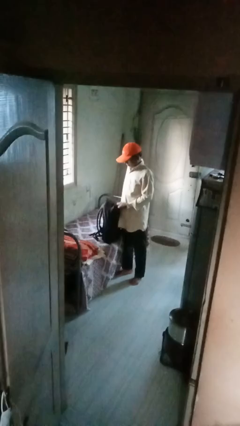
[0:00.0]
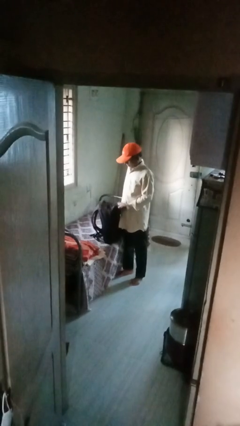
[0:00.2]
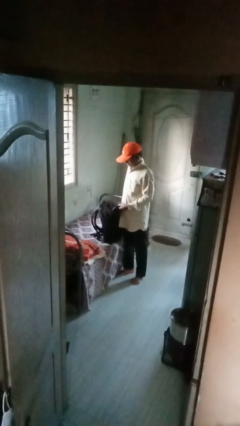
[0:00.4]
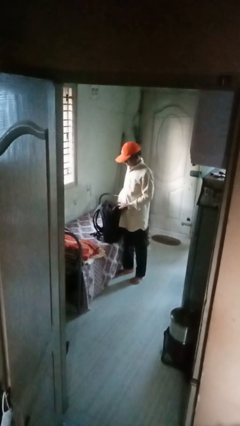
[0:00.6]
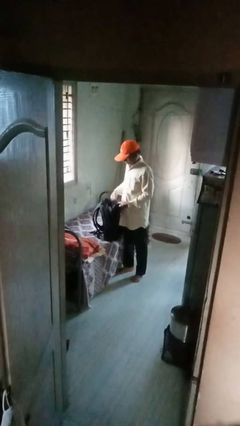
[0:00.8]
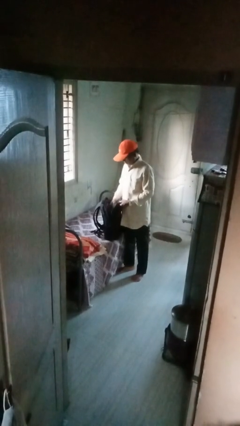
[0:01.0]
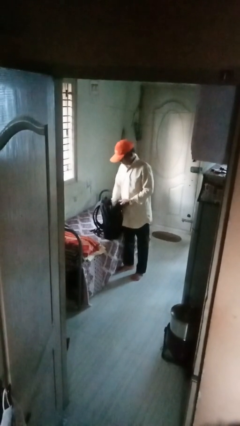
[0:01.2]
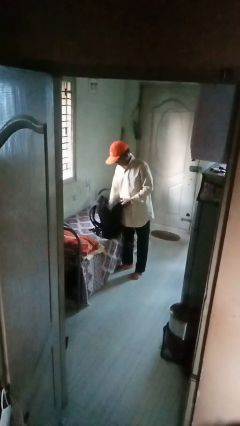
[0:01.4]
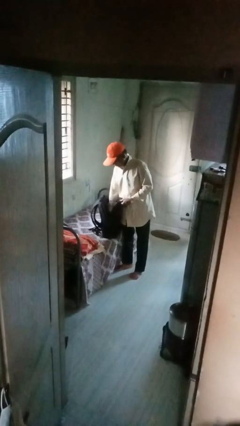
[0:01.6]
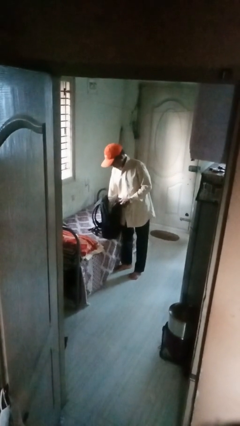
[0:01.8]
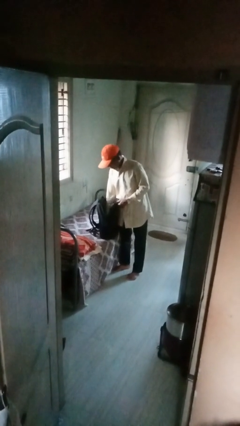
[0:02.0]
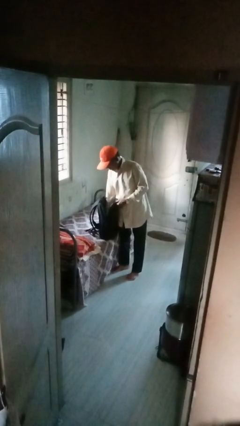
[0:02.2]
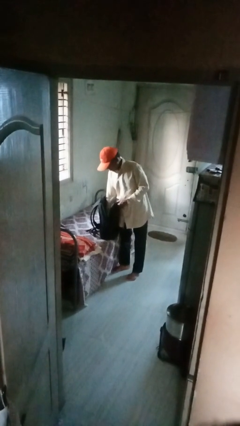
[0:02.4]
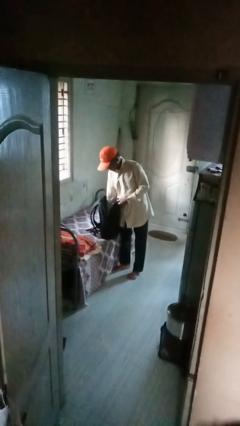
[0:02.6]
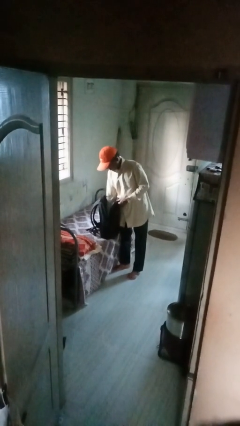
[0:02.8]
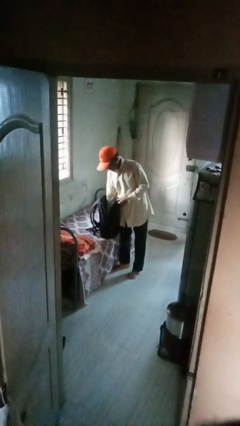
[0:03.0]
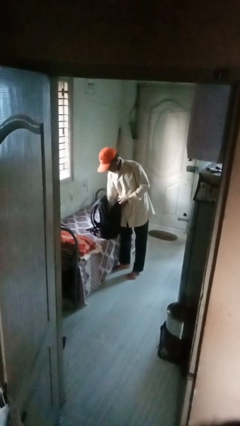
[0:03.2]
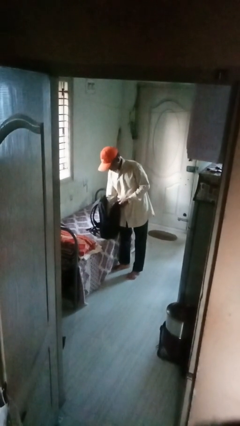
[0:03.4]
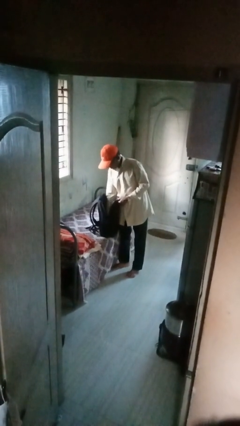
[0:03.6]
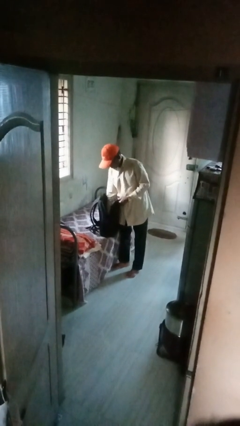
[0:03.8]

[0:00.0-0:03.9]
person searches in backpack

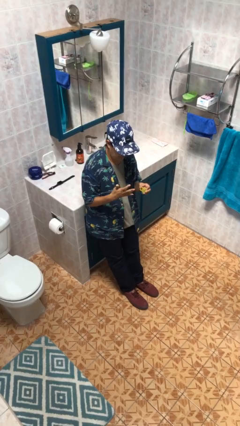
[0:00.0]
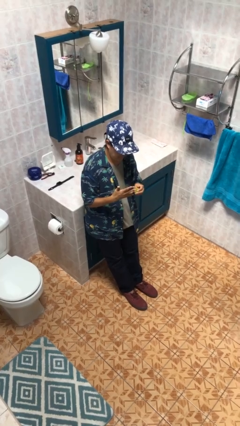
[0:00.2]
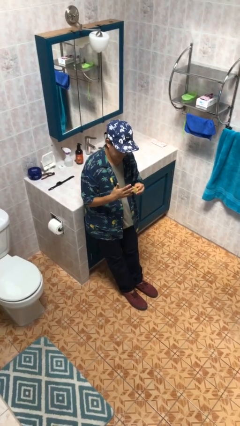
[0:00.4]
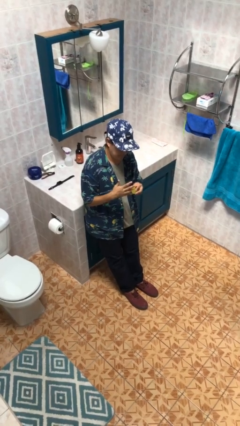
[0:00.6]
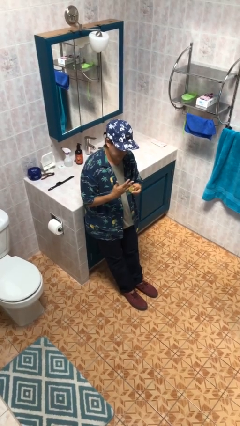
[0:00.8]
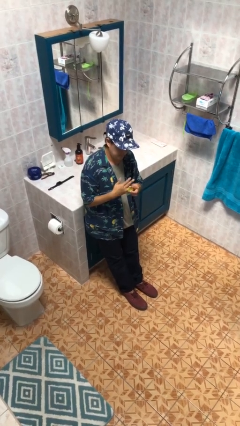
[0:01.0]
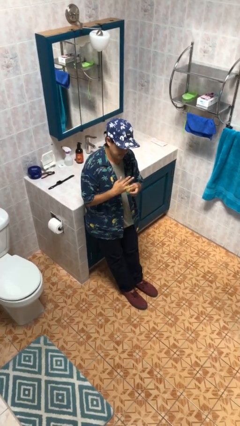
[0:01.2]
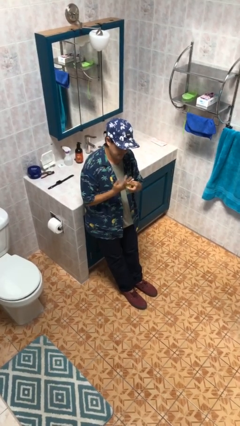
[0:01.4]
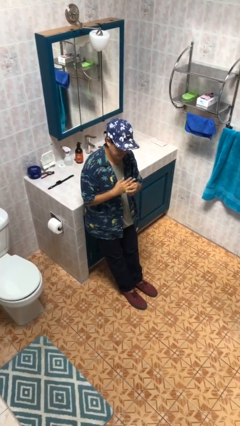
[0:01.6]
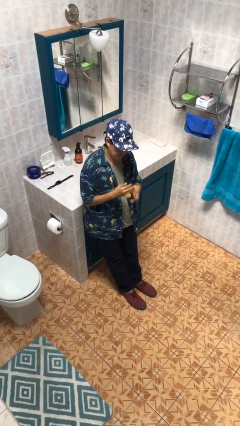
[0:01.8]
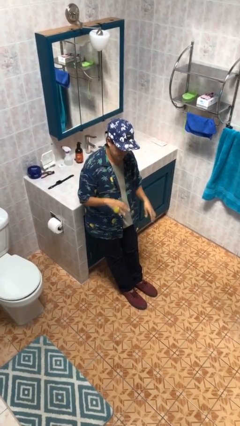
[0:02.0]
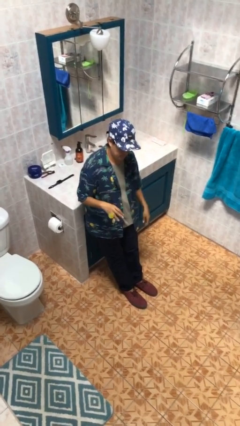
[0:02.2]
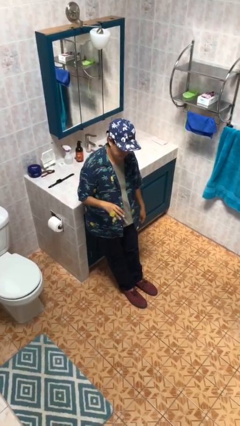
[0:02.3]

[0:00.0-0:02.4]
person puts on ring

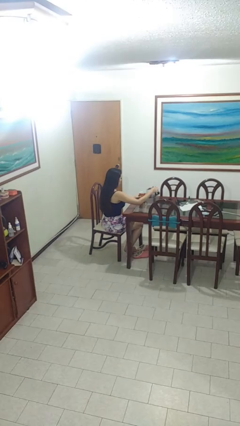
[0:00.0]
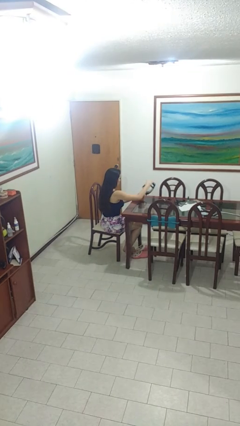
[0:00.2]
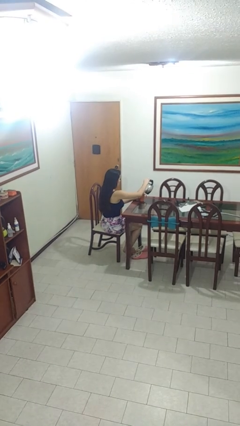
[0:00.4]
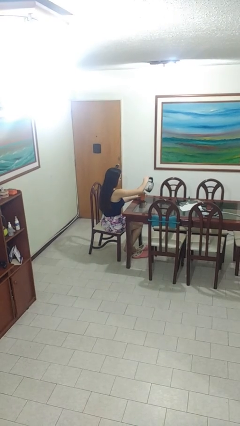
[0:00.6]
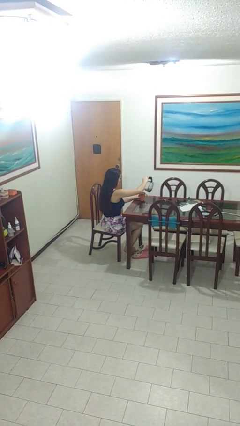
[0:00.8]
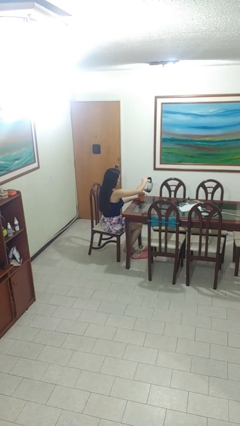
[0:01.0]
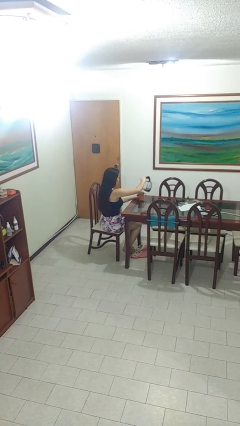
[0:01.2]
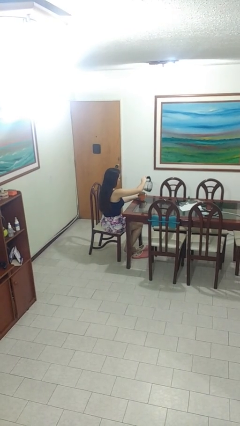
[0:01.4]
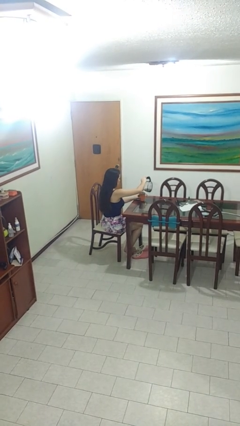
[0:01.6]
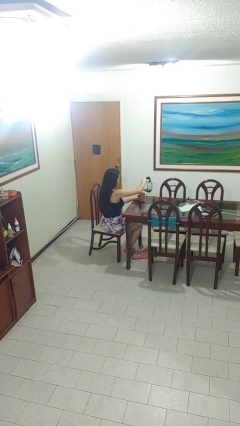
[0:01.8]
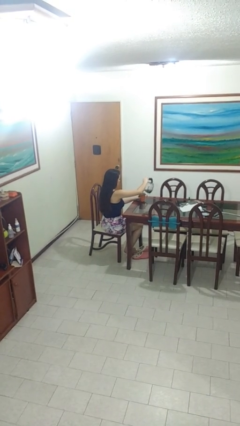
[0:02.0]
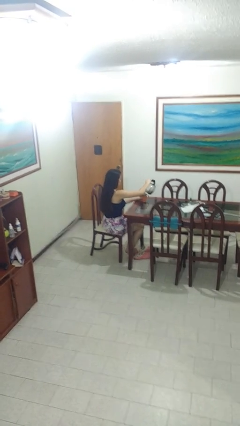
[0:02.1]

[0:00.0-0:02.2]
person pours coffee into mug

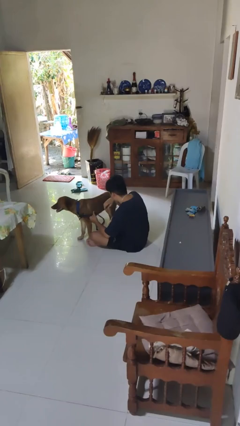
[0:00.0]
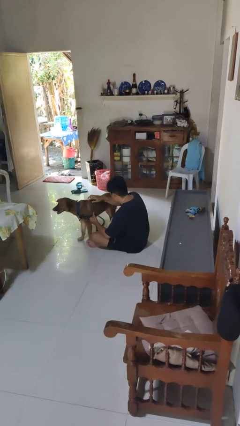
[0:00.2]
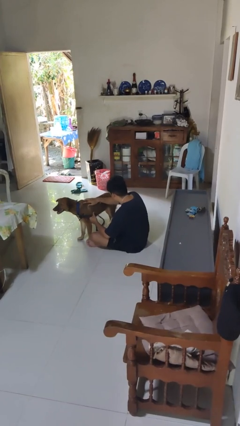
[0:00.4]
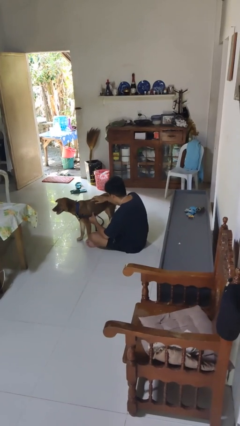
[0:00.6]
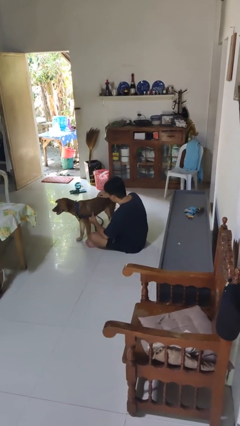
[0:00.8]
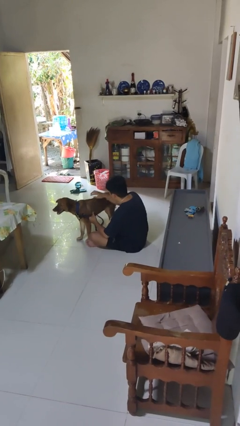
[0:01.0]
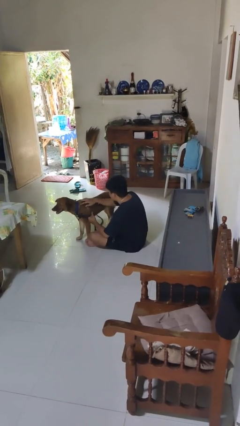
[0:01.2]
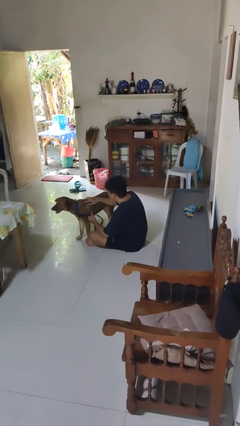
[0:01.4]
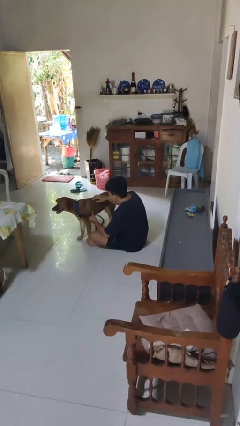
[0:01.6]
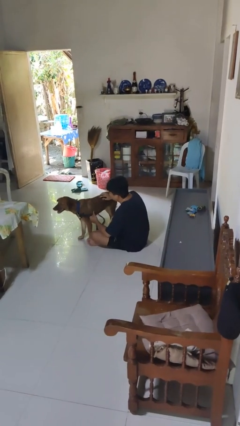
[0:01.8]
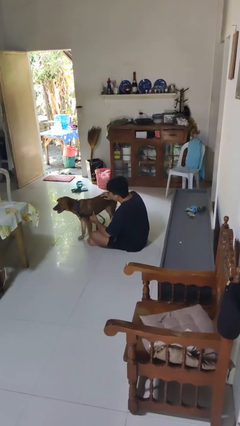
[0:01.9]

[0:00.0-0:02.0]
person pets dog

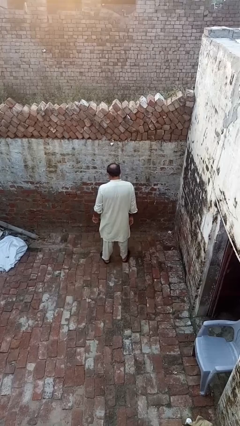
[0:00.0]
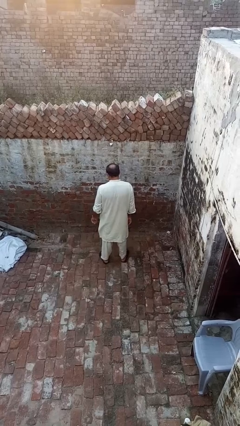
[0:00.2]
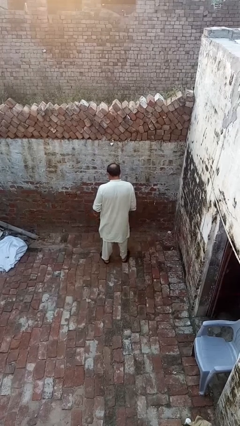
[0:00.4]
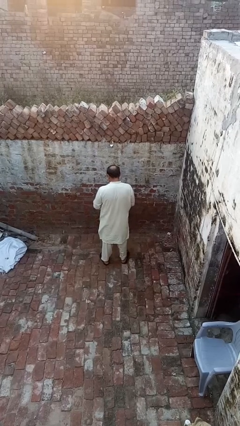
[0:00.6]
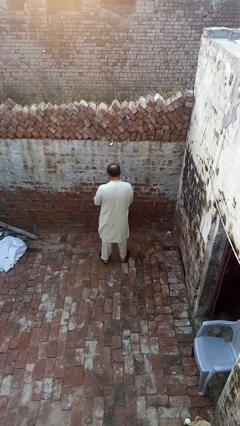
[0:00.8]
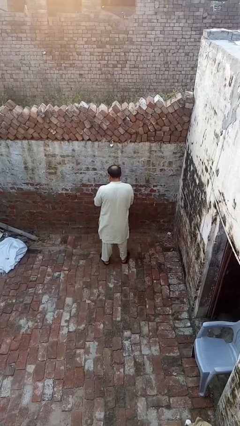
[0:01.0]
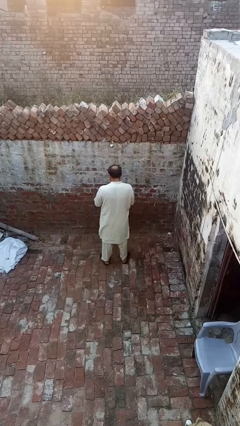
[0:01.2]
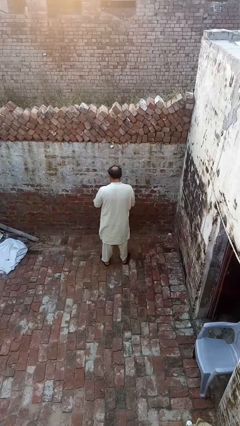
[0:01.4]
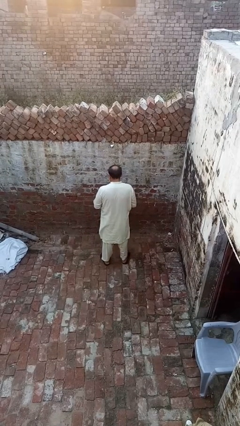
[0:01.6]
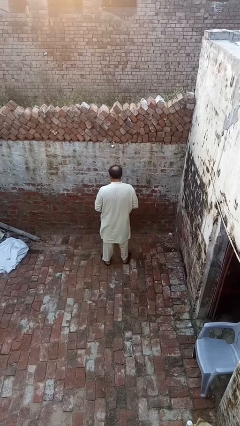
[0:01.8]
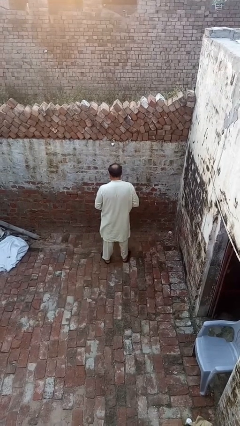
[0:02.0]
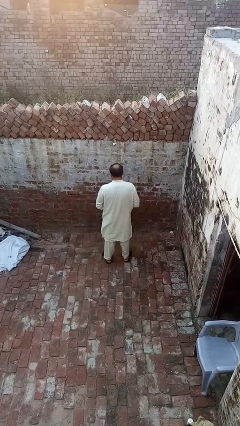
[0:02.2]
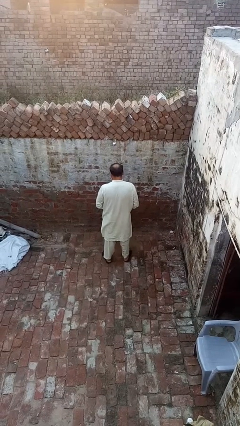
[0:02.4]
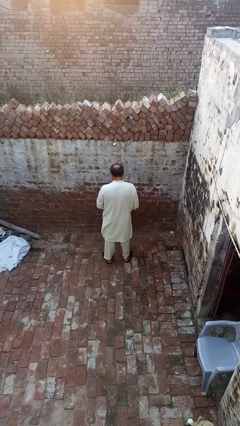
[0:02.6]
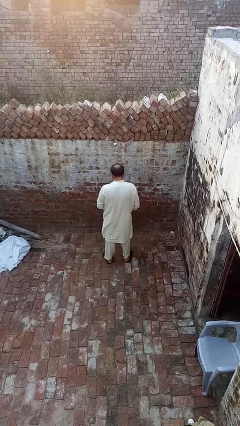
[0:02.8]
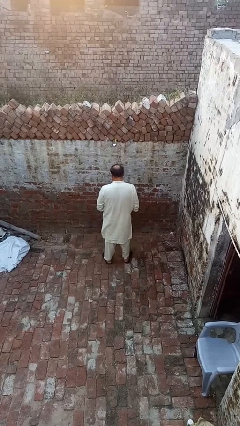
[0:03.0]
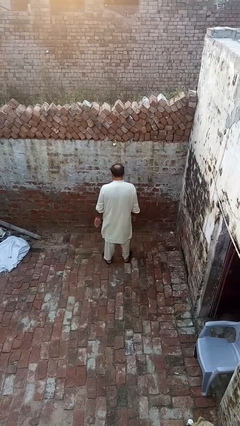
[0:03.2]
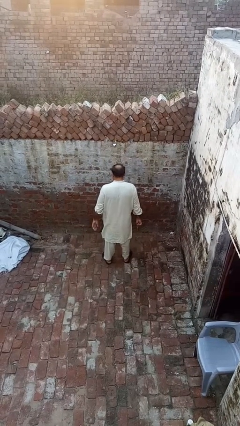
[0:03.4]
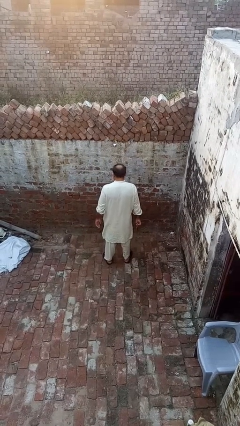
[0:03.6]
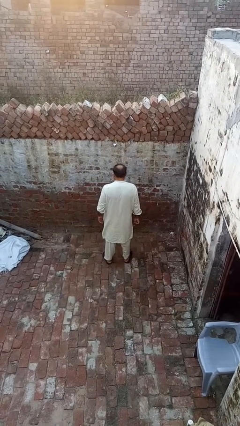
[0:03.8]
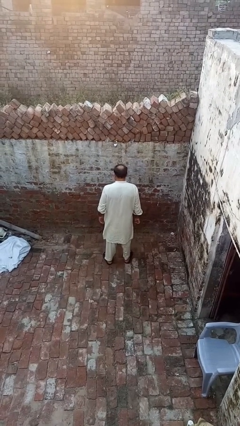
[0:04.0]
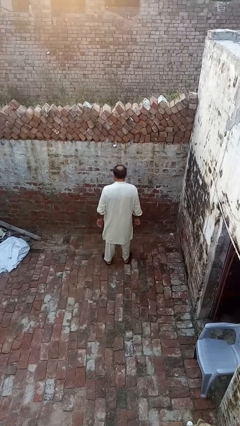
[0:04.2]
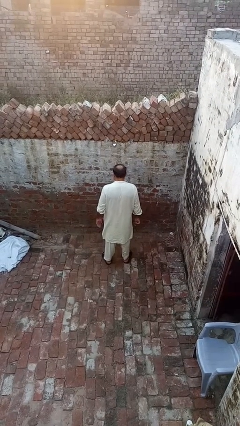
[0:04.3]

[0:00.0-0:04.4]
person takes off wristwatch

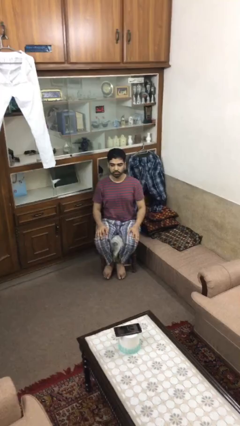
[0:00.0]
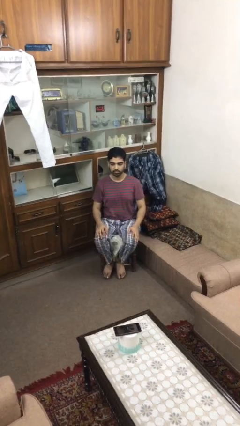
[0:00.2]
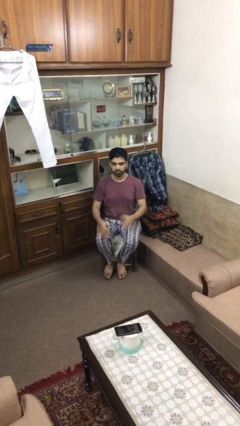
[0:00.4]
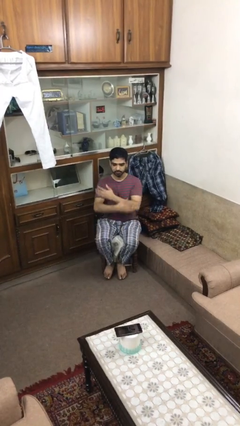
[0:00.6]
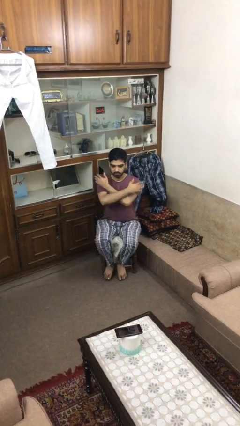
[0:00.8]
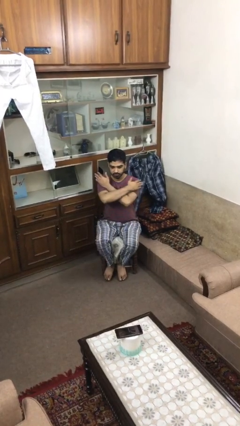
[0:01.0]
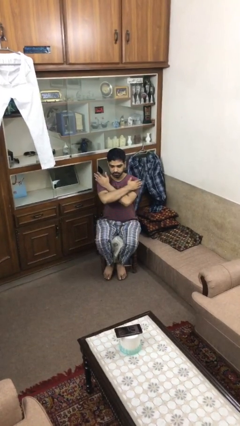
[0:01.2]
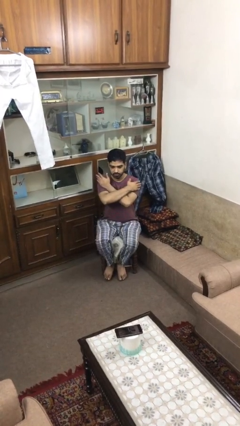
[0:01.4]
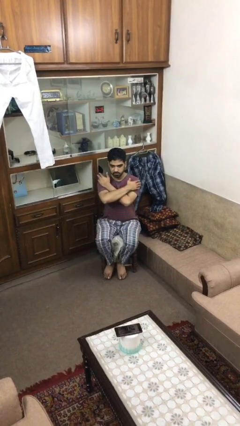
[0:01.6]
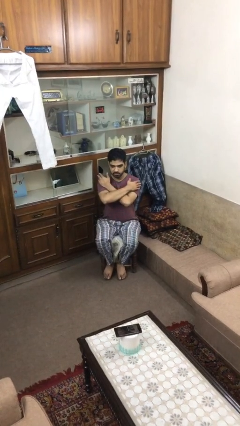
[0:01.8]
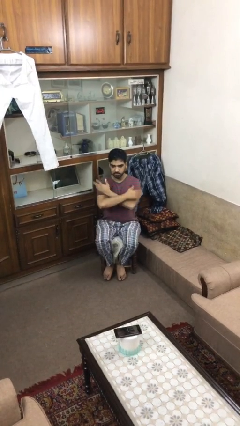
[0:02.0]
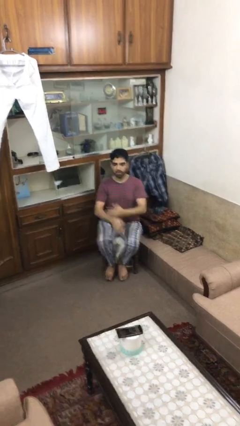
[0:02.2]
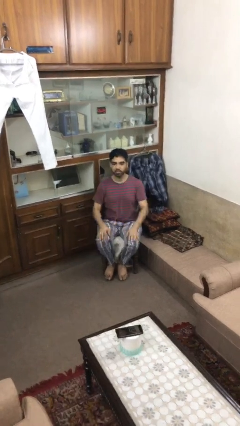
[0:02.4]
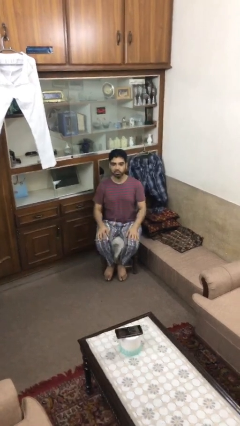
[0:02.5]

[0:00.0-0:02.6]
person crosses arms

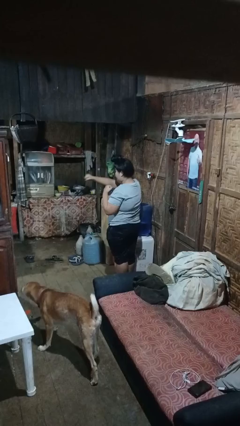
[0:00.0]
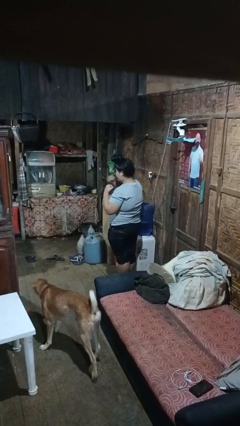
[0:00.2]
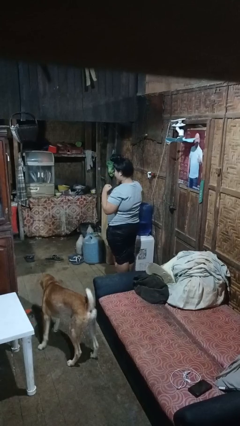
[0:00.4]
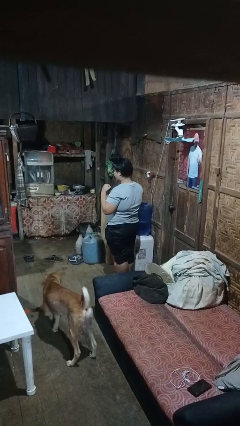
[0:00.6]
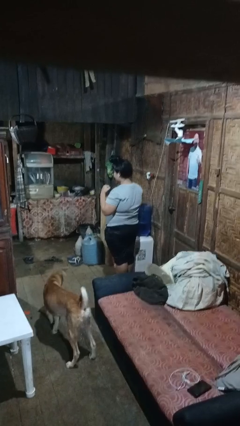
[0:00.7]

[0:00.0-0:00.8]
person punches
